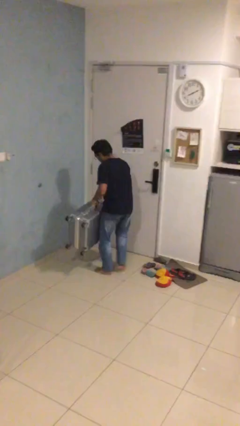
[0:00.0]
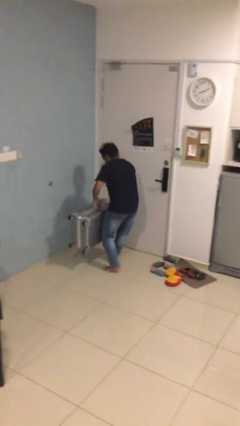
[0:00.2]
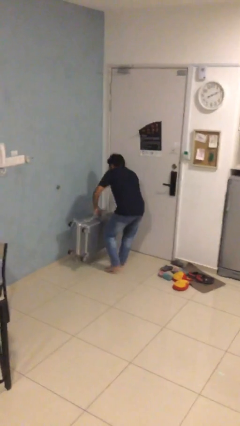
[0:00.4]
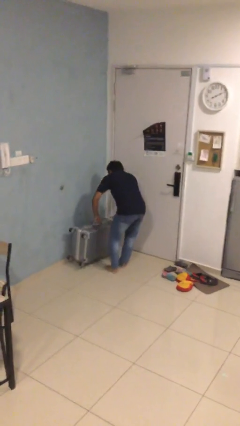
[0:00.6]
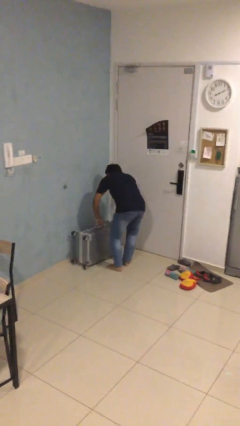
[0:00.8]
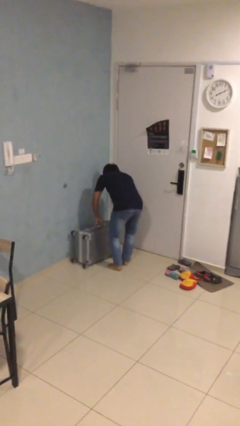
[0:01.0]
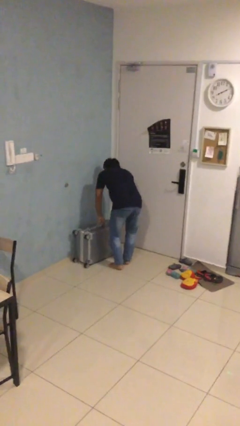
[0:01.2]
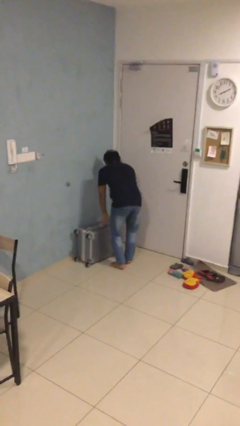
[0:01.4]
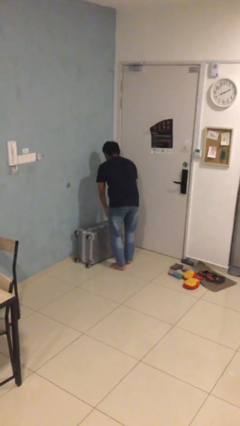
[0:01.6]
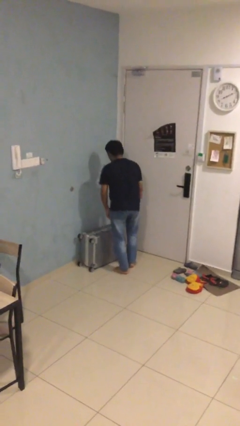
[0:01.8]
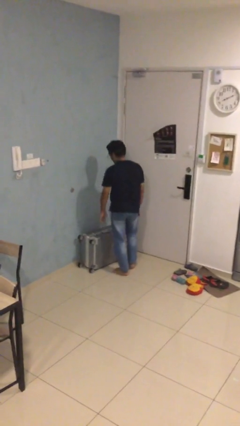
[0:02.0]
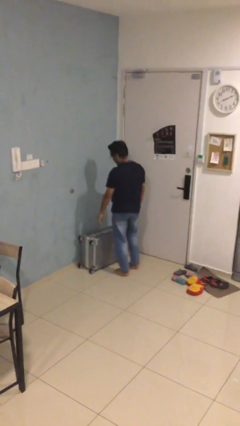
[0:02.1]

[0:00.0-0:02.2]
person puts down object on floor

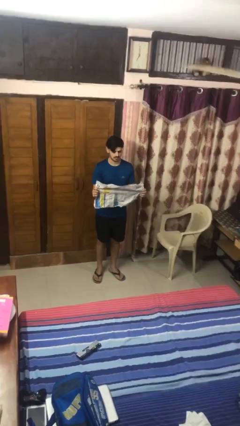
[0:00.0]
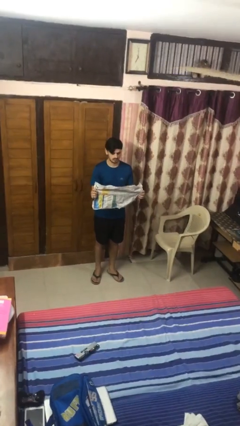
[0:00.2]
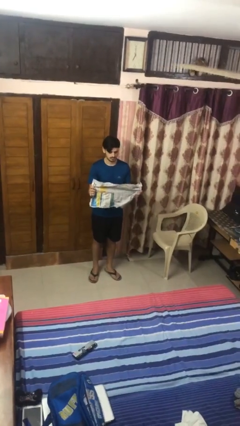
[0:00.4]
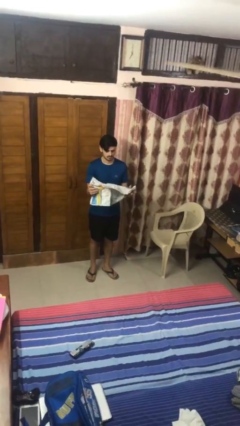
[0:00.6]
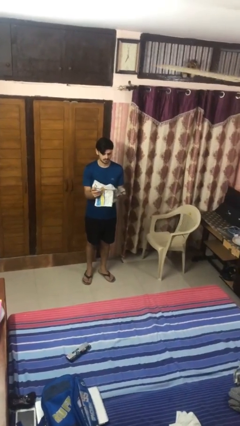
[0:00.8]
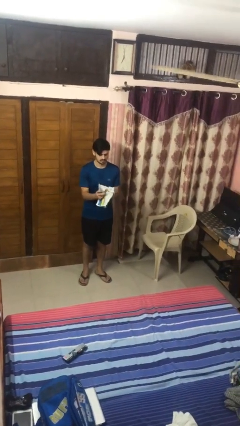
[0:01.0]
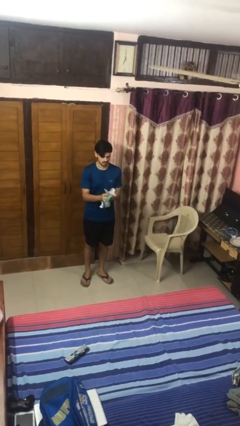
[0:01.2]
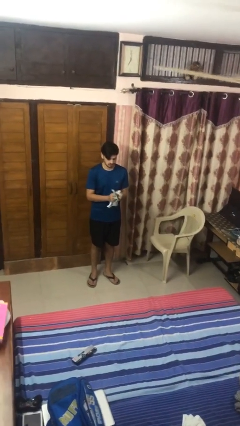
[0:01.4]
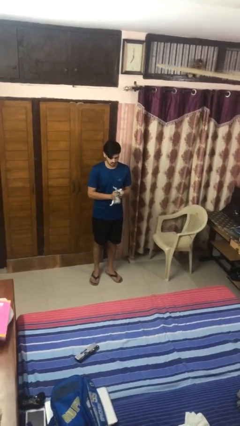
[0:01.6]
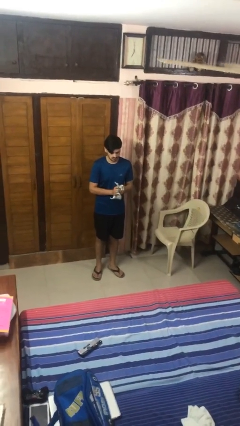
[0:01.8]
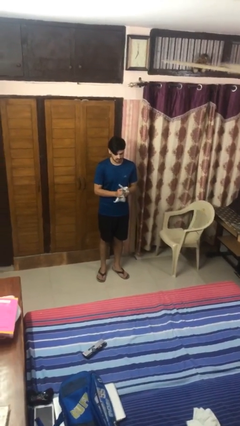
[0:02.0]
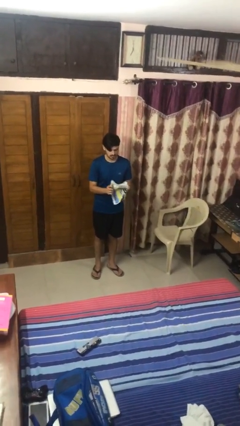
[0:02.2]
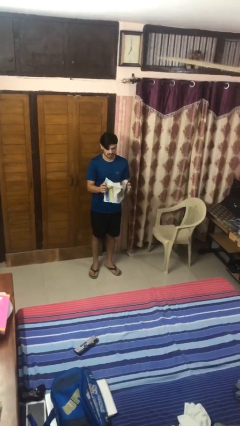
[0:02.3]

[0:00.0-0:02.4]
person crumples paper

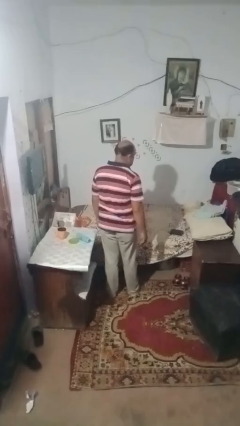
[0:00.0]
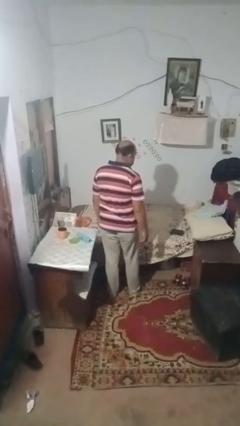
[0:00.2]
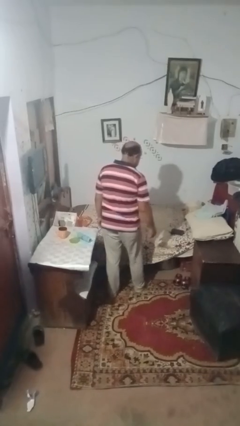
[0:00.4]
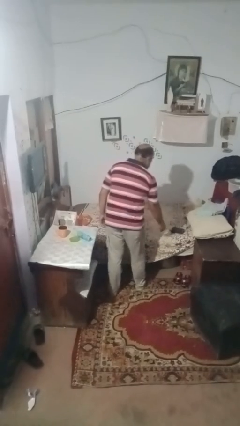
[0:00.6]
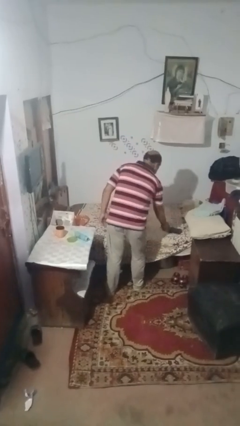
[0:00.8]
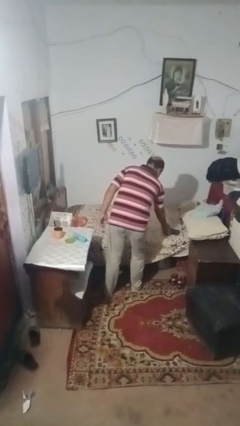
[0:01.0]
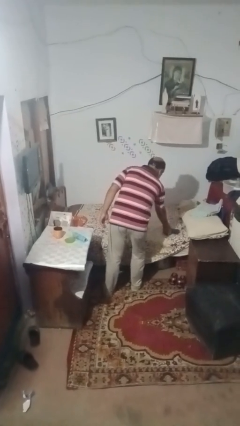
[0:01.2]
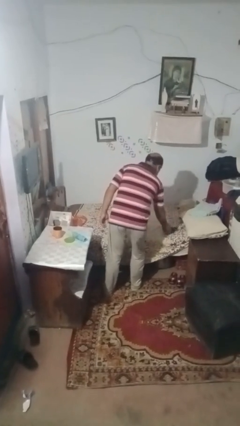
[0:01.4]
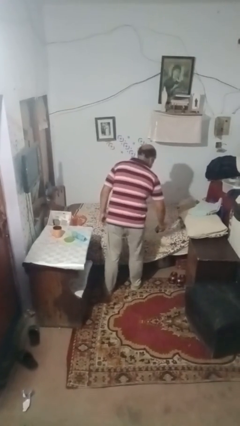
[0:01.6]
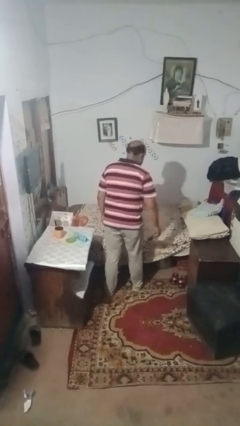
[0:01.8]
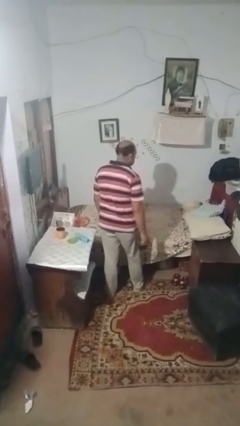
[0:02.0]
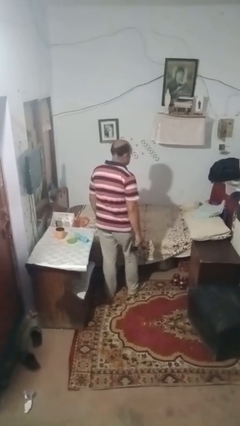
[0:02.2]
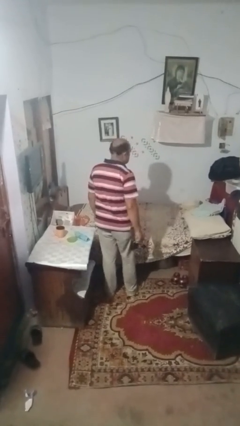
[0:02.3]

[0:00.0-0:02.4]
person picks up object from bed

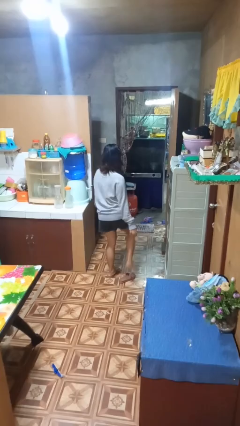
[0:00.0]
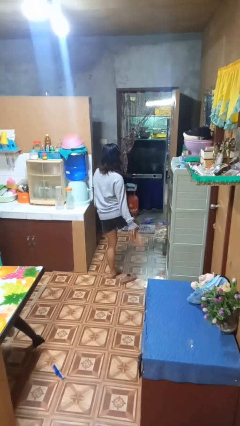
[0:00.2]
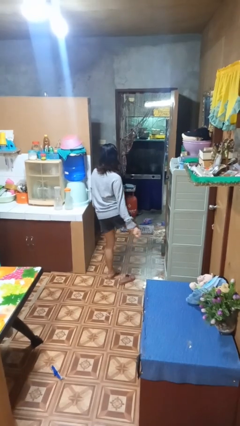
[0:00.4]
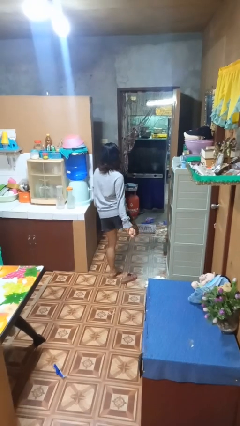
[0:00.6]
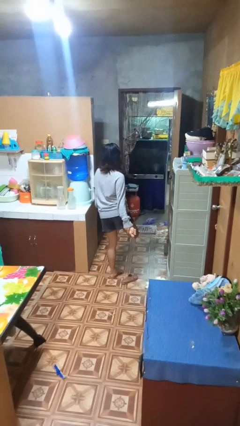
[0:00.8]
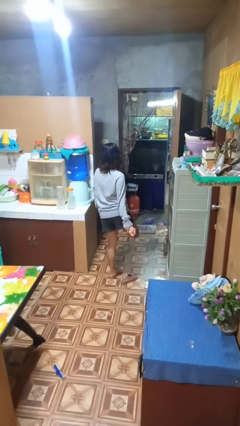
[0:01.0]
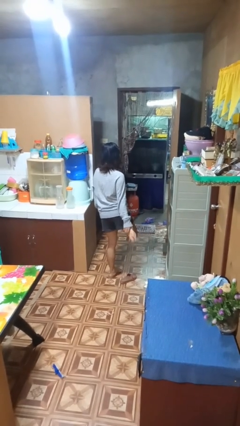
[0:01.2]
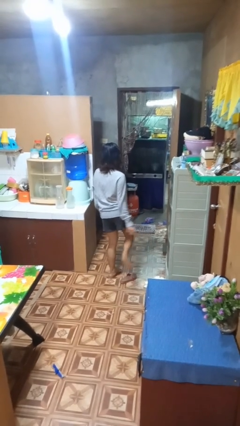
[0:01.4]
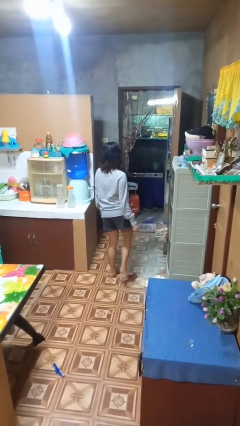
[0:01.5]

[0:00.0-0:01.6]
person rubs foot

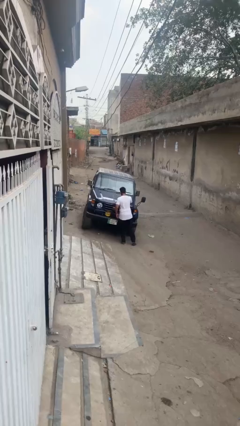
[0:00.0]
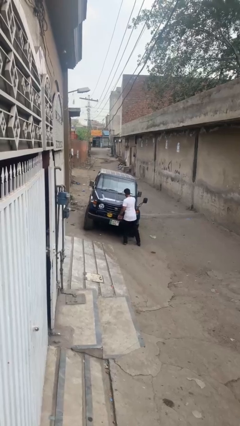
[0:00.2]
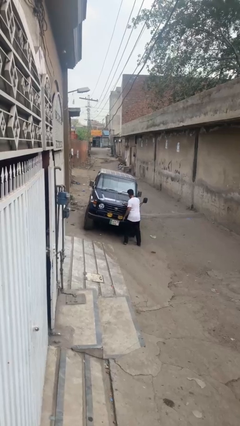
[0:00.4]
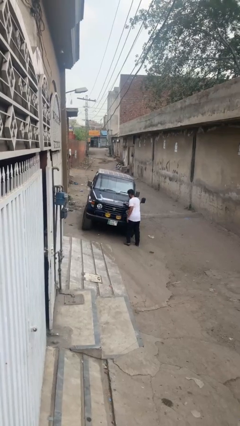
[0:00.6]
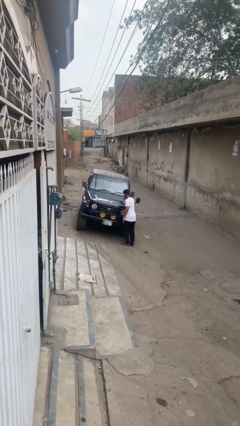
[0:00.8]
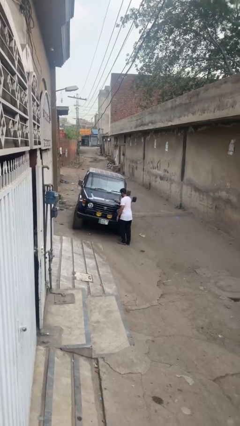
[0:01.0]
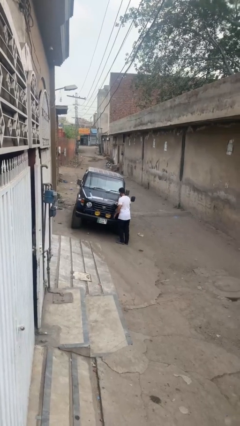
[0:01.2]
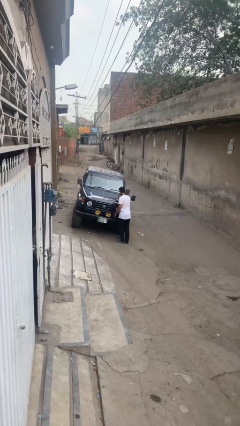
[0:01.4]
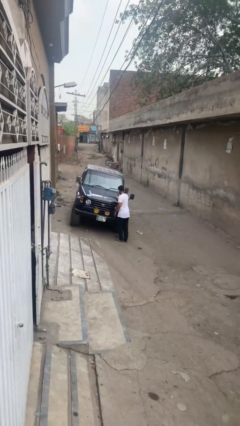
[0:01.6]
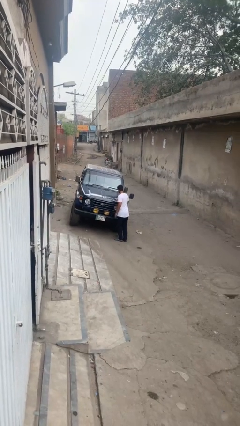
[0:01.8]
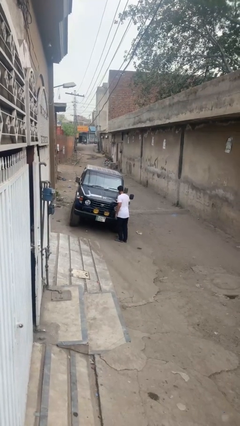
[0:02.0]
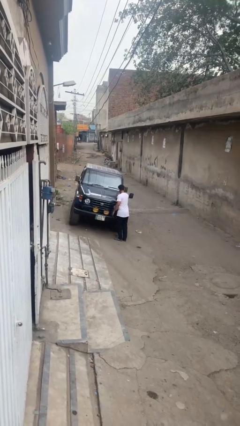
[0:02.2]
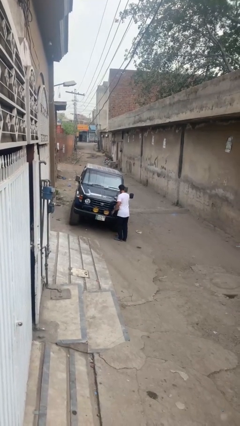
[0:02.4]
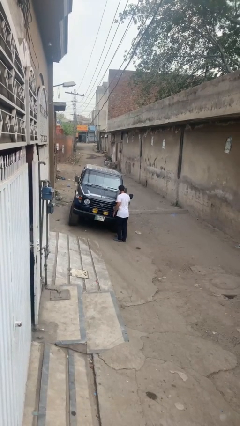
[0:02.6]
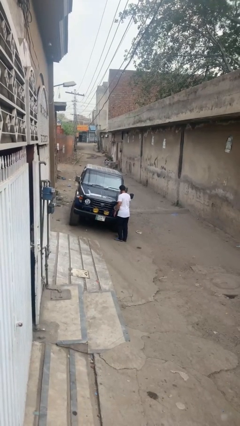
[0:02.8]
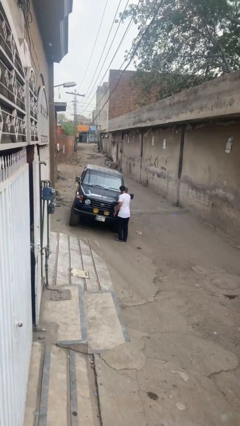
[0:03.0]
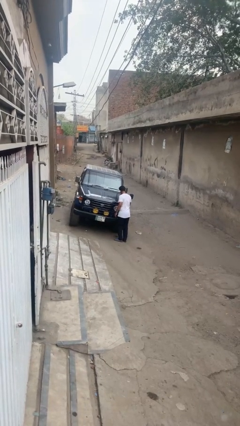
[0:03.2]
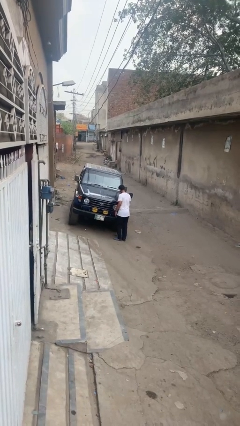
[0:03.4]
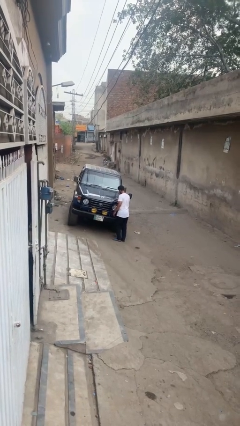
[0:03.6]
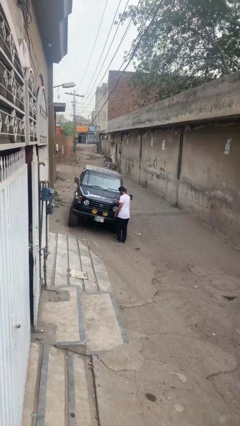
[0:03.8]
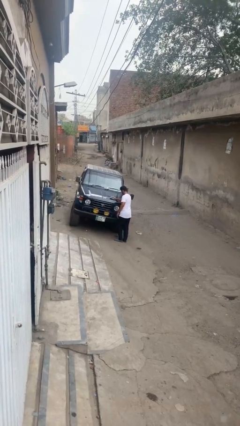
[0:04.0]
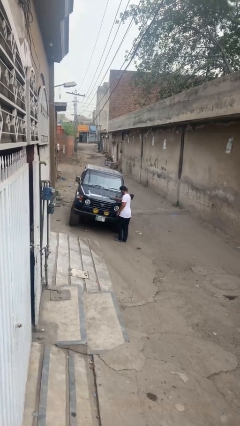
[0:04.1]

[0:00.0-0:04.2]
person polishes car with rag

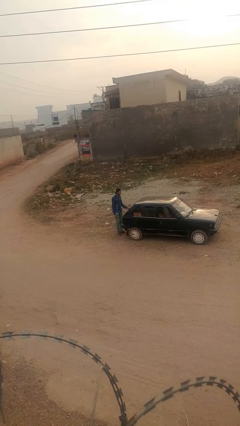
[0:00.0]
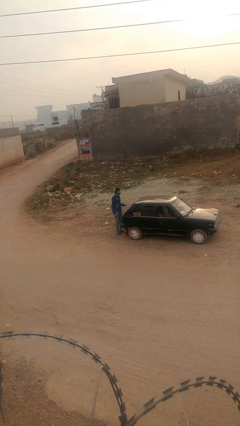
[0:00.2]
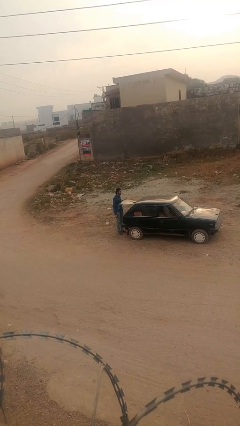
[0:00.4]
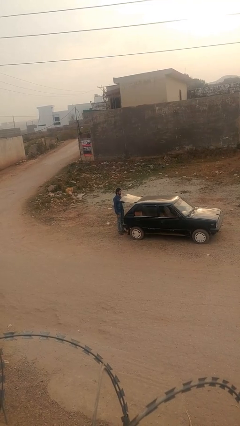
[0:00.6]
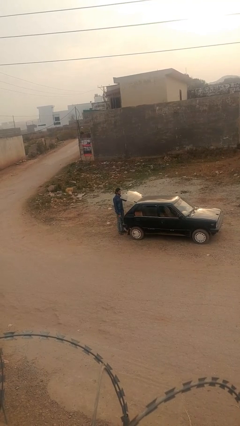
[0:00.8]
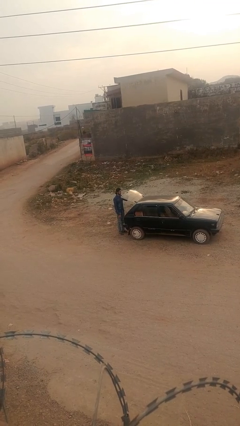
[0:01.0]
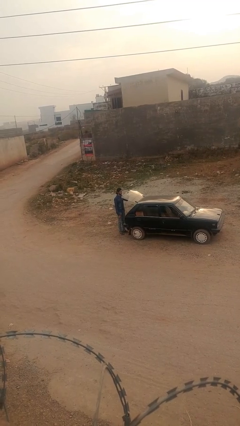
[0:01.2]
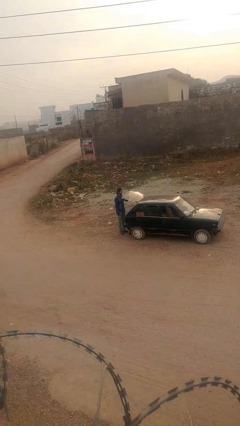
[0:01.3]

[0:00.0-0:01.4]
person opens car trunk

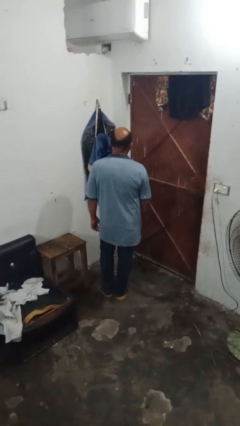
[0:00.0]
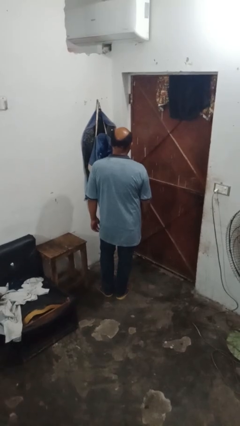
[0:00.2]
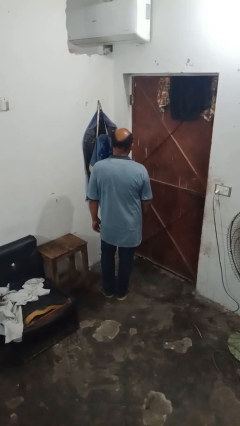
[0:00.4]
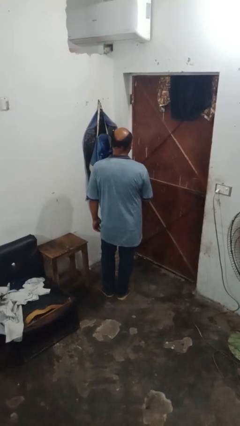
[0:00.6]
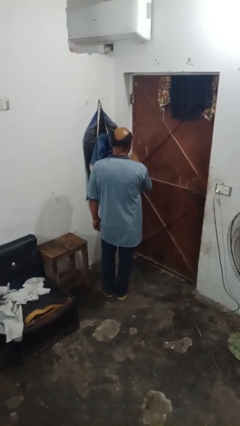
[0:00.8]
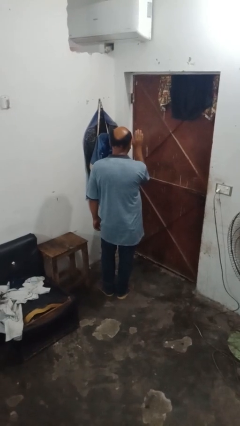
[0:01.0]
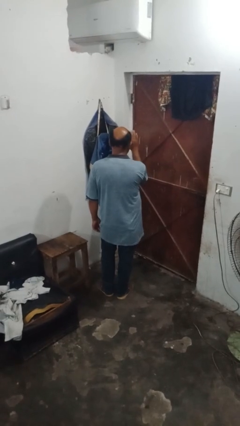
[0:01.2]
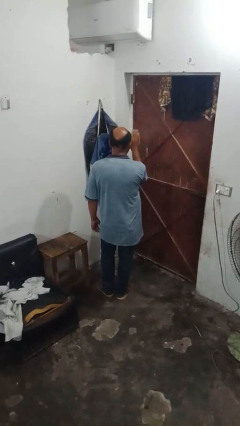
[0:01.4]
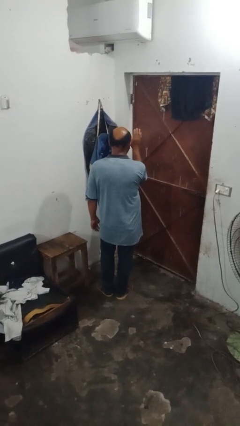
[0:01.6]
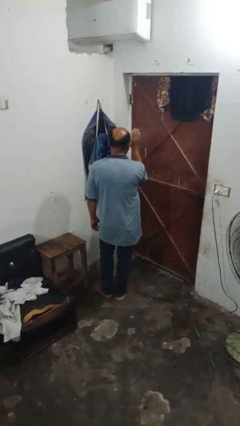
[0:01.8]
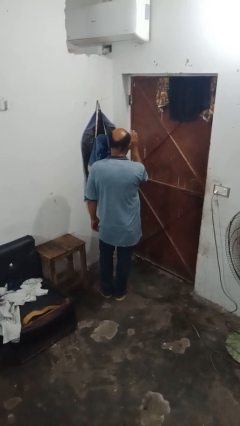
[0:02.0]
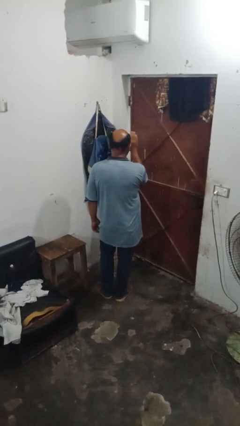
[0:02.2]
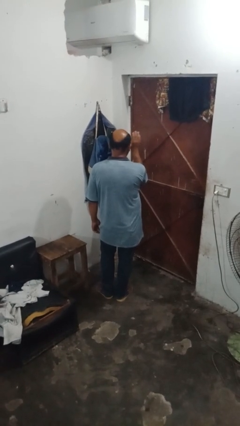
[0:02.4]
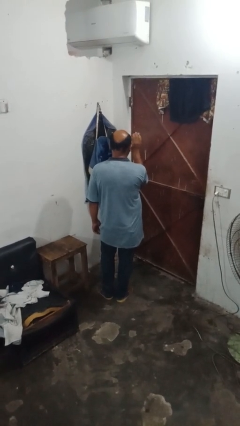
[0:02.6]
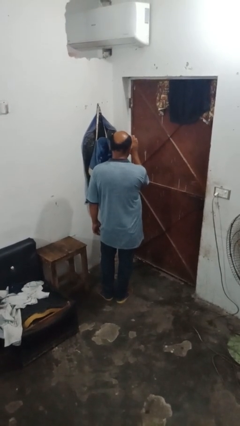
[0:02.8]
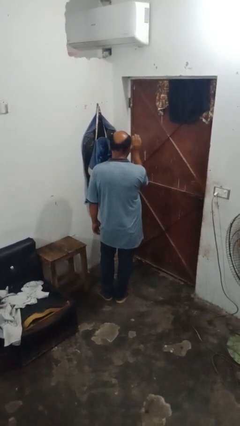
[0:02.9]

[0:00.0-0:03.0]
person waves hand over object
